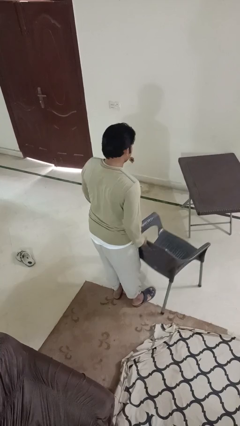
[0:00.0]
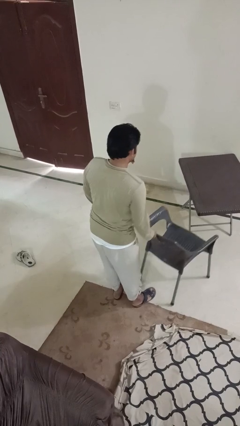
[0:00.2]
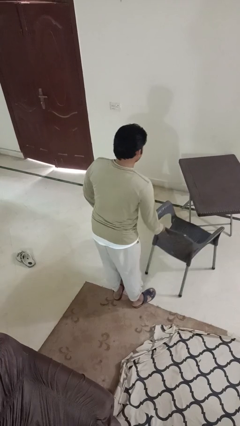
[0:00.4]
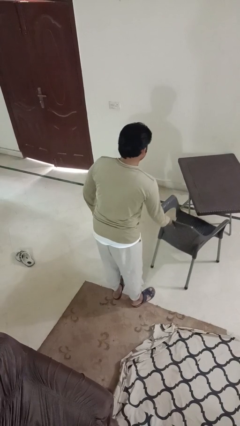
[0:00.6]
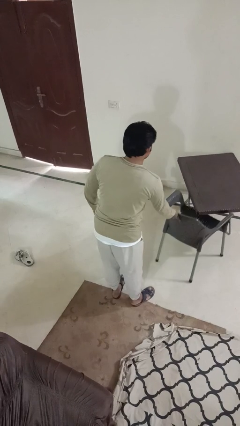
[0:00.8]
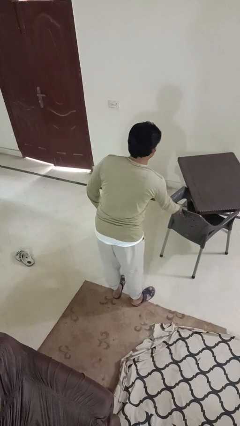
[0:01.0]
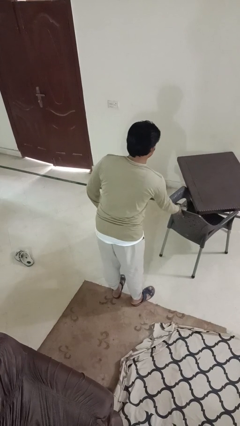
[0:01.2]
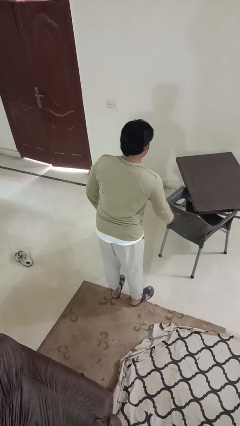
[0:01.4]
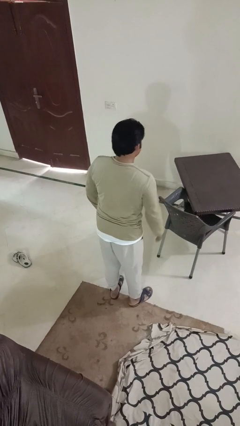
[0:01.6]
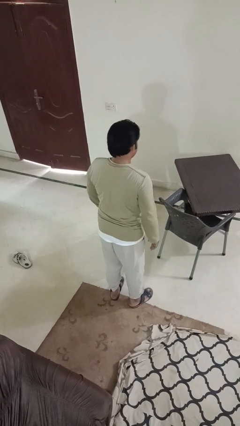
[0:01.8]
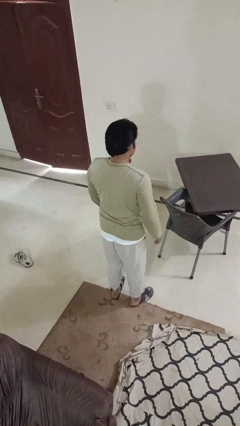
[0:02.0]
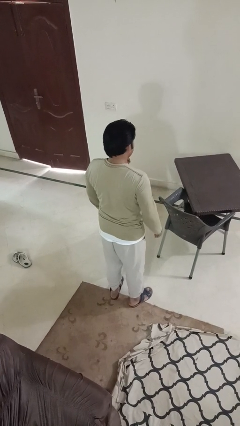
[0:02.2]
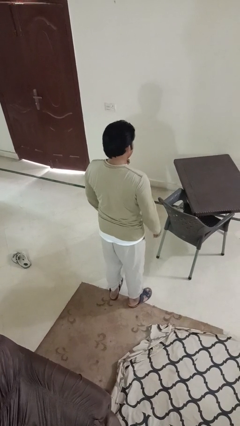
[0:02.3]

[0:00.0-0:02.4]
person pushes in chair

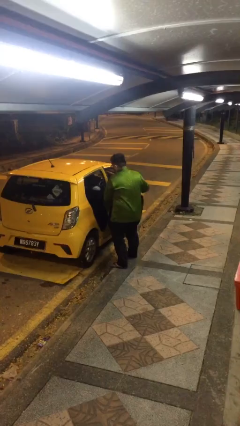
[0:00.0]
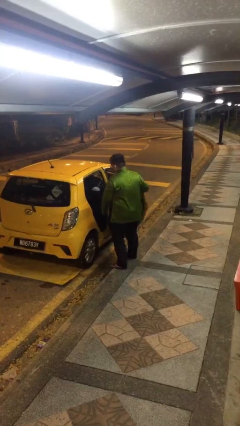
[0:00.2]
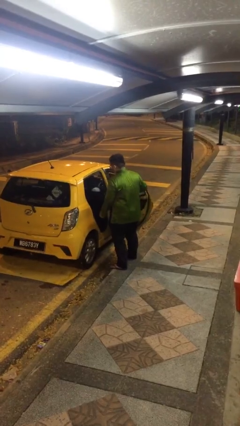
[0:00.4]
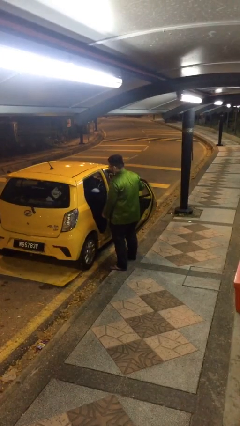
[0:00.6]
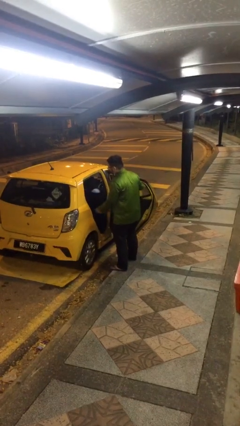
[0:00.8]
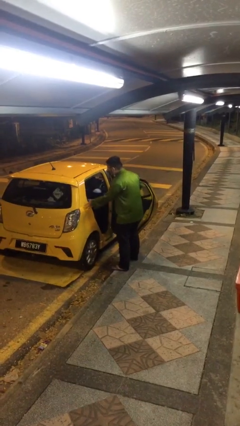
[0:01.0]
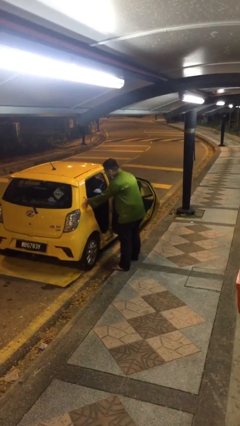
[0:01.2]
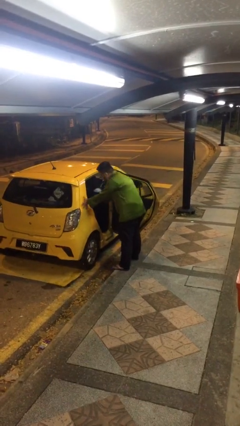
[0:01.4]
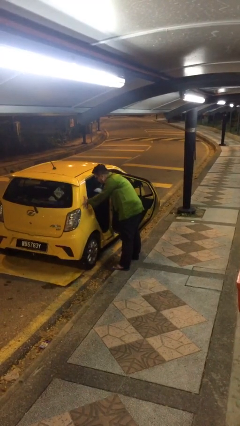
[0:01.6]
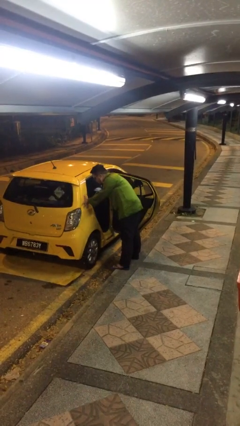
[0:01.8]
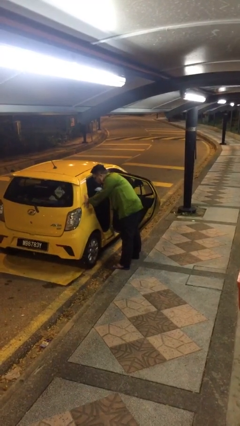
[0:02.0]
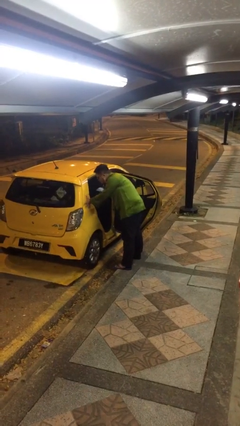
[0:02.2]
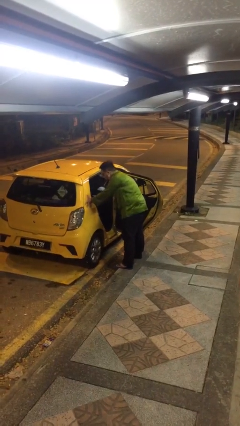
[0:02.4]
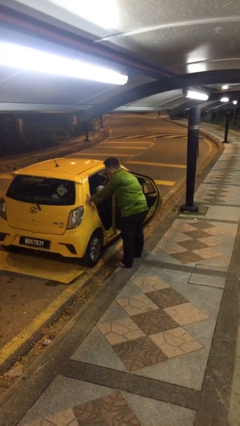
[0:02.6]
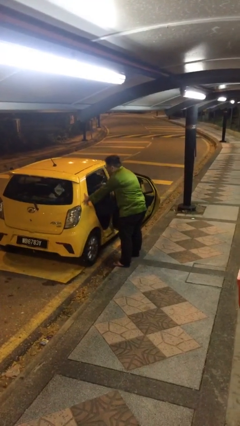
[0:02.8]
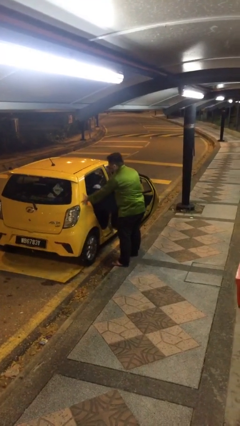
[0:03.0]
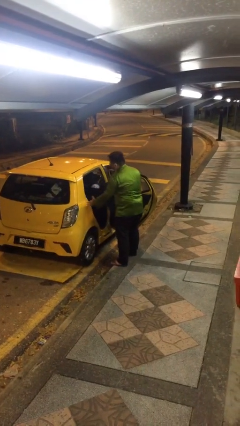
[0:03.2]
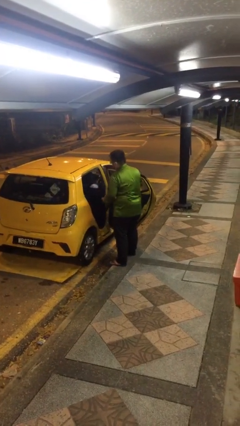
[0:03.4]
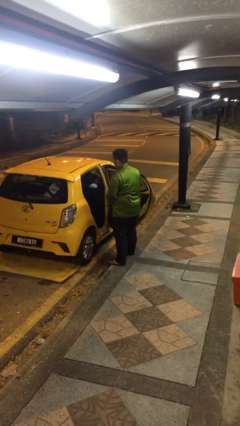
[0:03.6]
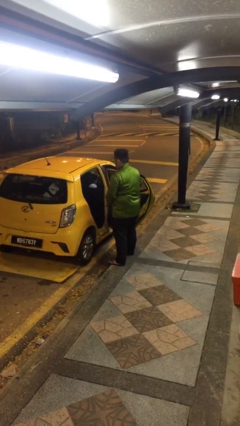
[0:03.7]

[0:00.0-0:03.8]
person unloads car

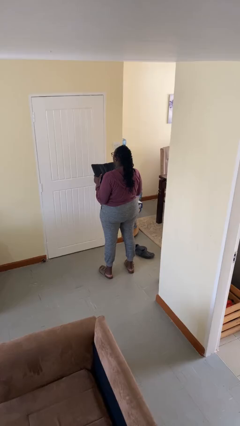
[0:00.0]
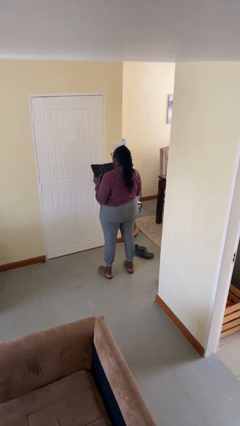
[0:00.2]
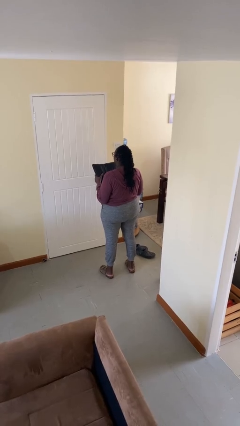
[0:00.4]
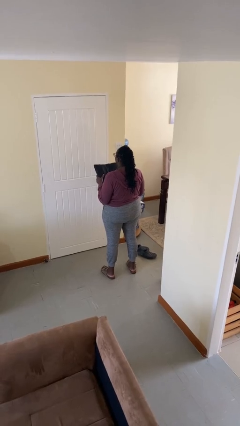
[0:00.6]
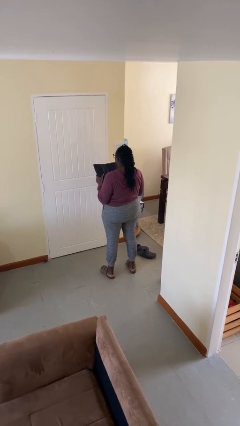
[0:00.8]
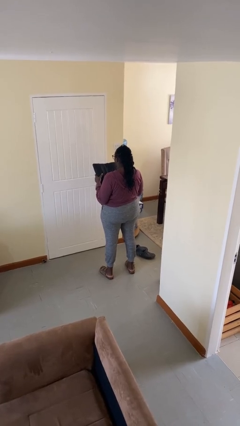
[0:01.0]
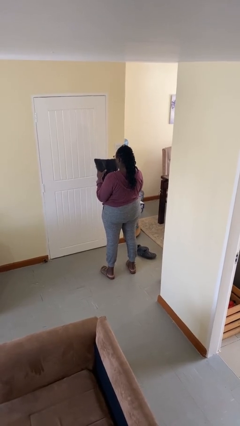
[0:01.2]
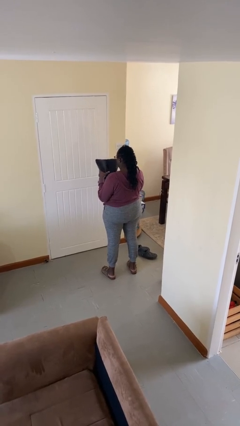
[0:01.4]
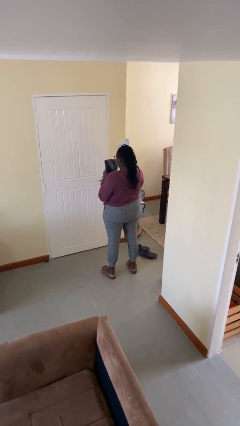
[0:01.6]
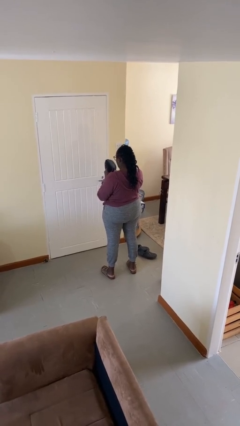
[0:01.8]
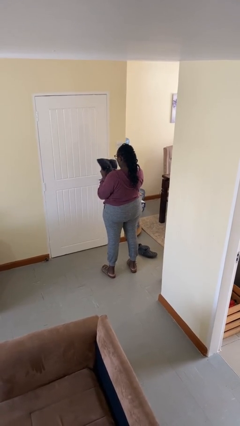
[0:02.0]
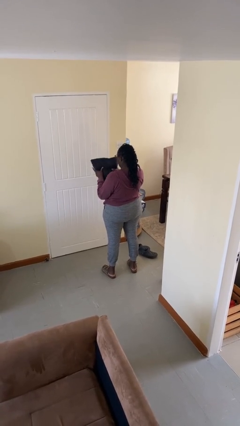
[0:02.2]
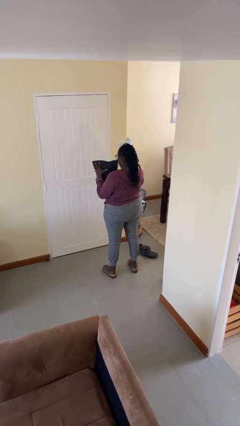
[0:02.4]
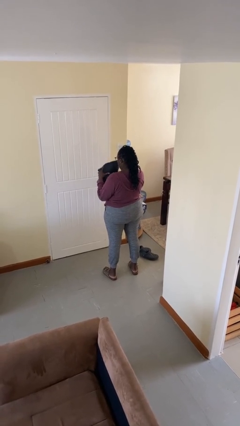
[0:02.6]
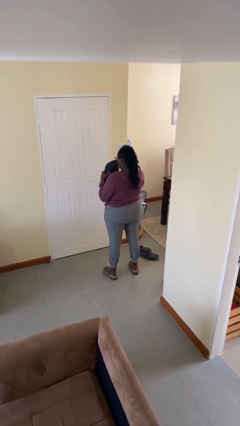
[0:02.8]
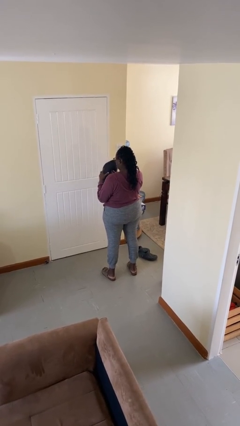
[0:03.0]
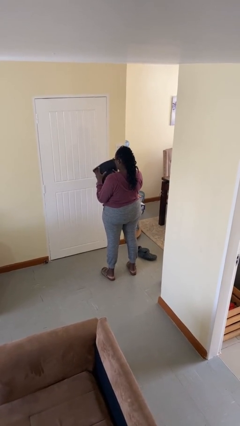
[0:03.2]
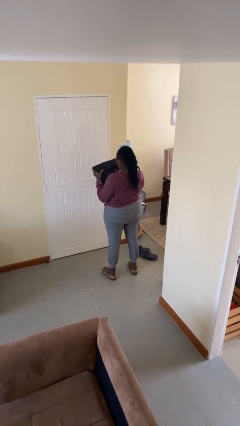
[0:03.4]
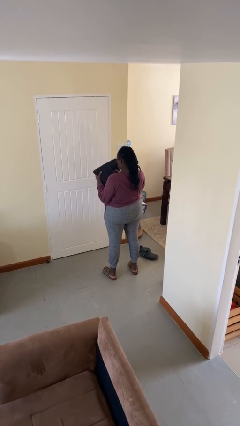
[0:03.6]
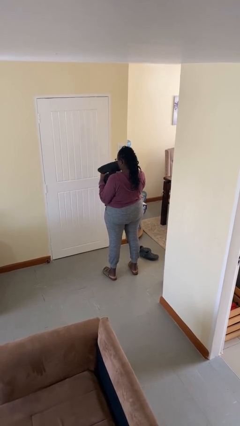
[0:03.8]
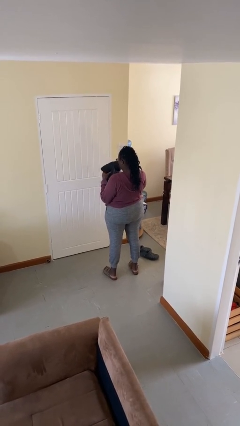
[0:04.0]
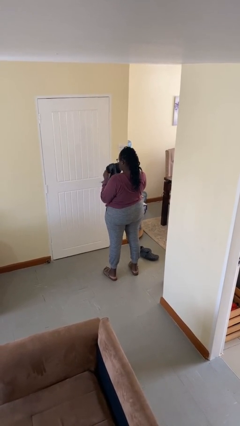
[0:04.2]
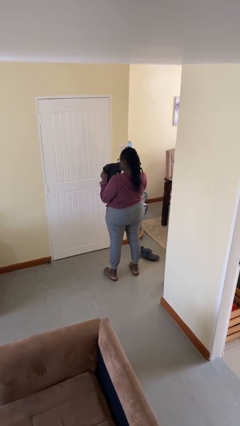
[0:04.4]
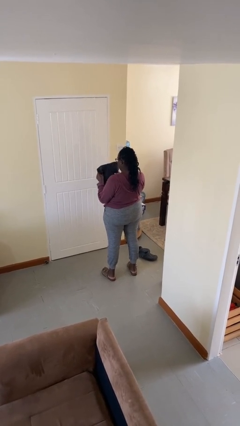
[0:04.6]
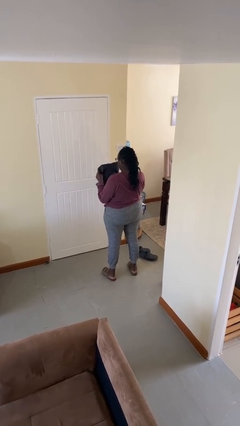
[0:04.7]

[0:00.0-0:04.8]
person squeezes object

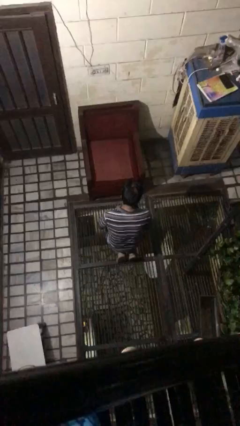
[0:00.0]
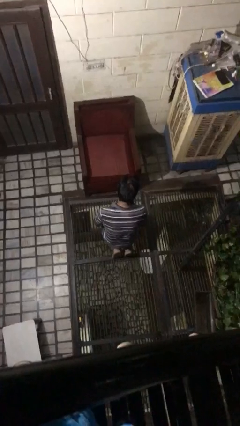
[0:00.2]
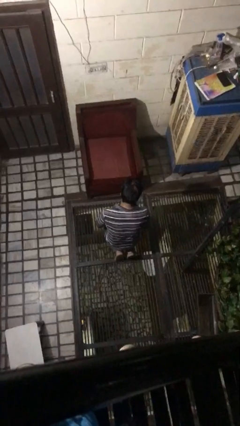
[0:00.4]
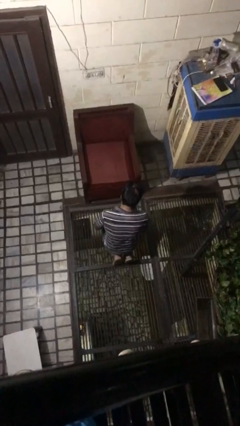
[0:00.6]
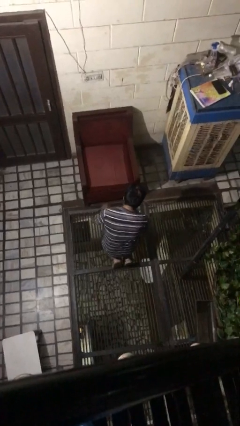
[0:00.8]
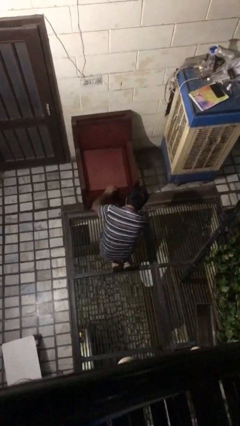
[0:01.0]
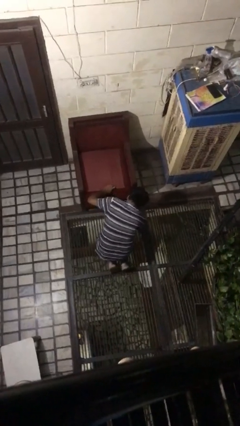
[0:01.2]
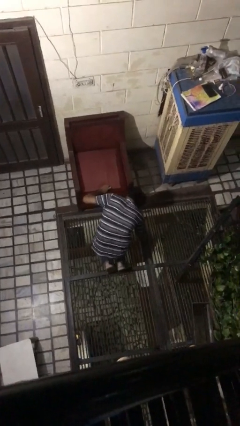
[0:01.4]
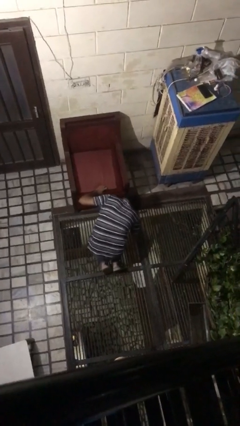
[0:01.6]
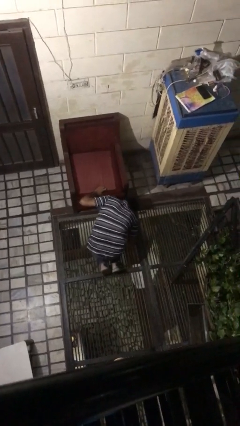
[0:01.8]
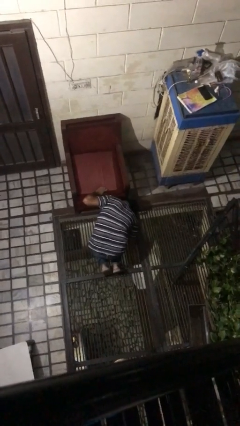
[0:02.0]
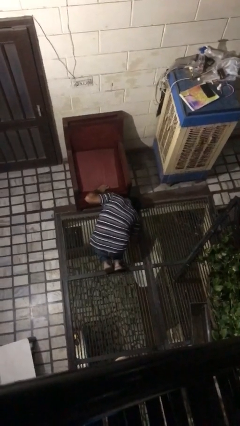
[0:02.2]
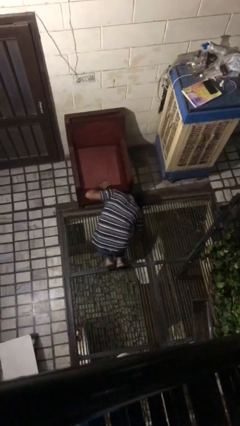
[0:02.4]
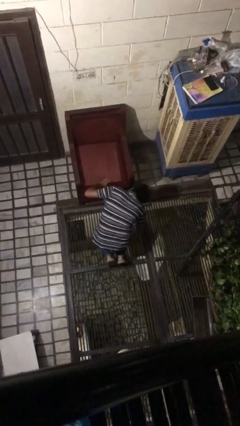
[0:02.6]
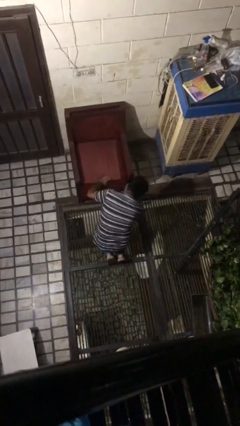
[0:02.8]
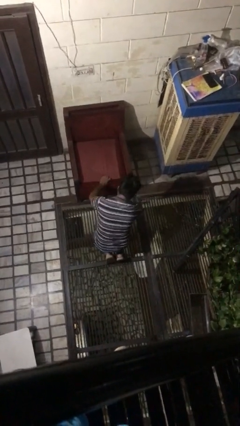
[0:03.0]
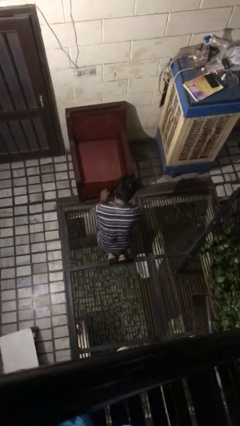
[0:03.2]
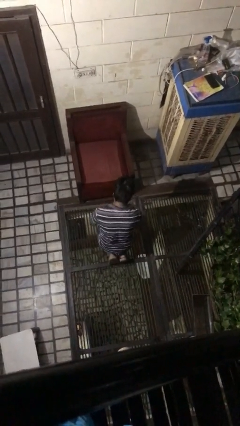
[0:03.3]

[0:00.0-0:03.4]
person searches under couch

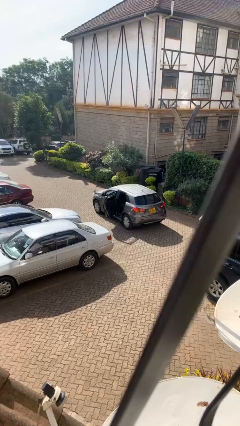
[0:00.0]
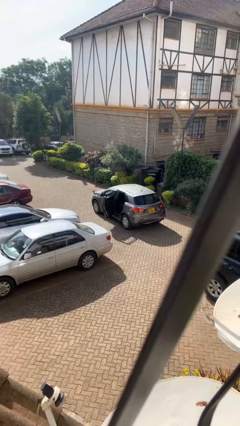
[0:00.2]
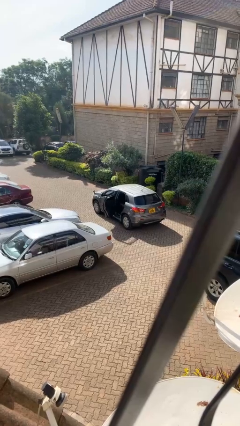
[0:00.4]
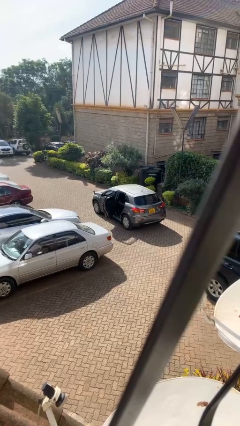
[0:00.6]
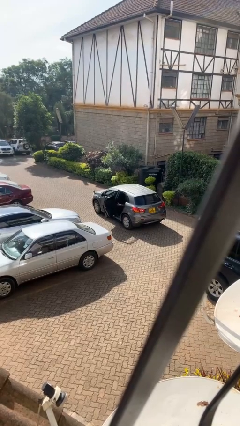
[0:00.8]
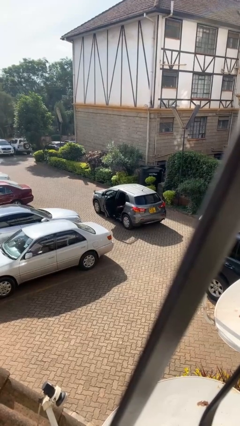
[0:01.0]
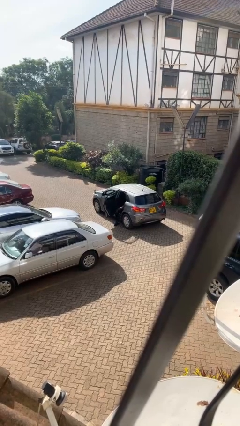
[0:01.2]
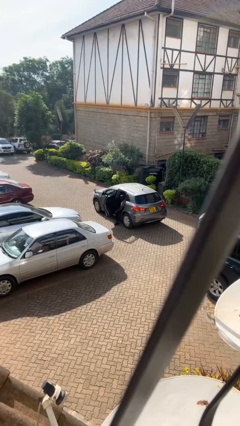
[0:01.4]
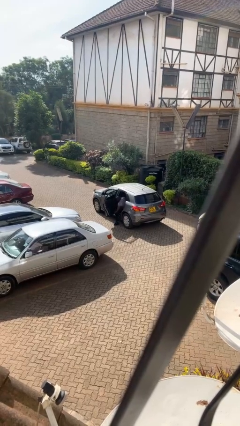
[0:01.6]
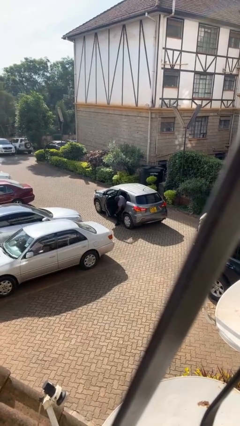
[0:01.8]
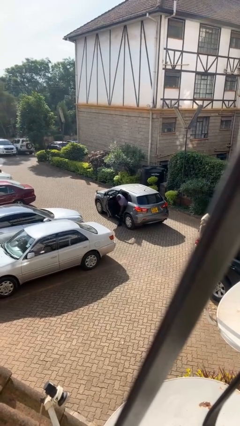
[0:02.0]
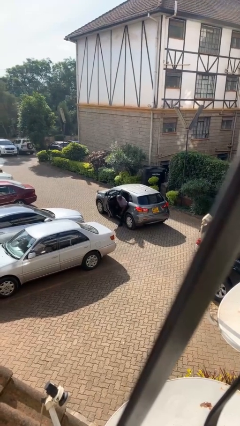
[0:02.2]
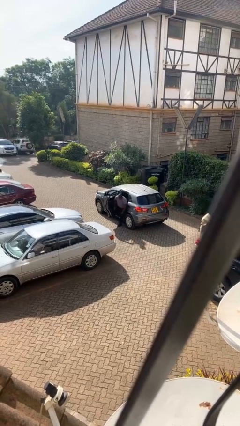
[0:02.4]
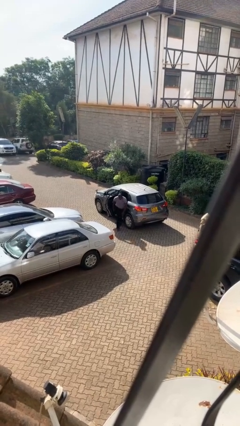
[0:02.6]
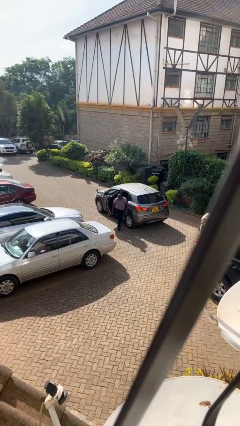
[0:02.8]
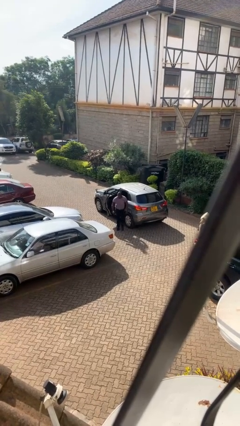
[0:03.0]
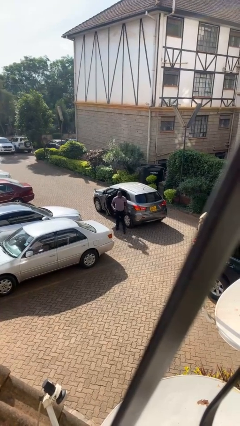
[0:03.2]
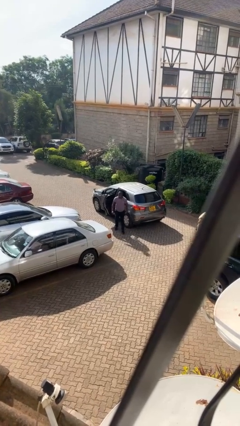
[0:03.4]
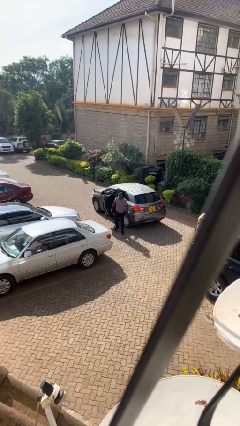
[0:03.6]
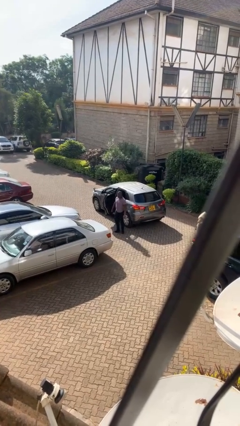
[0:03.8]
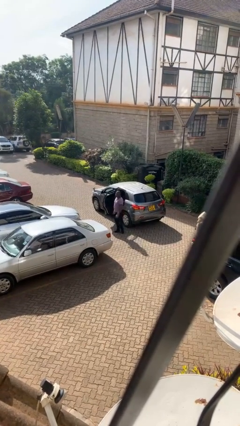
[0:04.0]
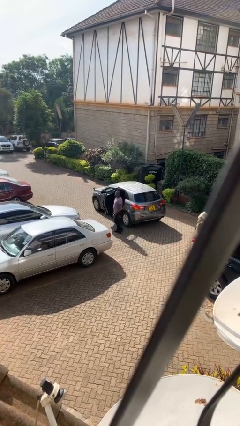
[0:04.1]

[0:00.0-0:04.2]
person exits car
